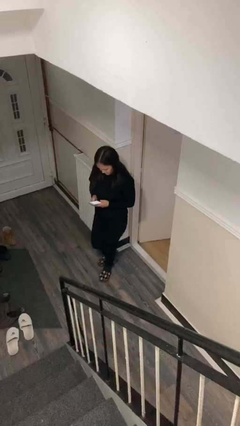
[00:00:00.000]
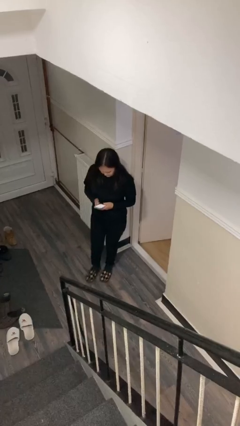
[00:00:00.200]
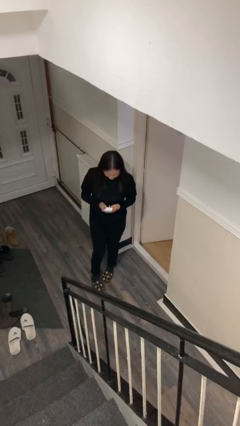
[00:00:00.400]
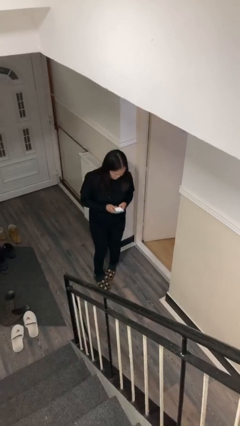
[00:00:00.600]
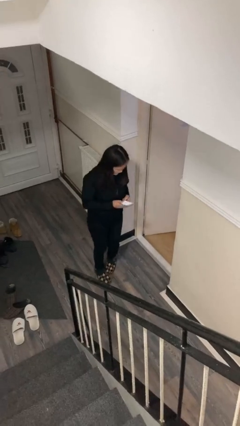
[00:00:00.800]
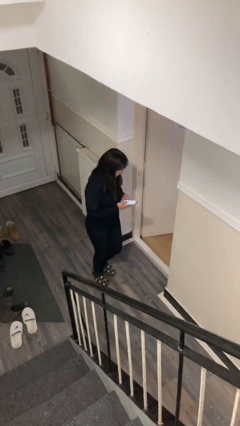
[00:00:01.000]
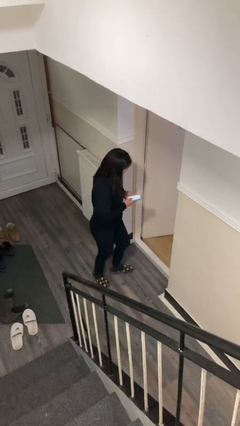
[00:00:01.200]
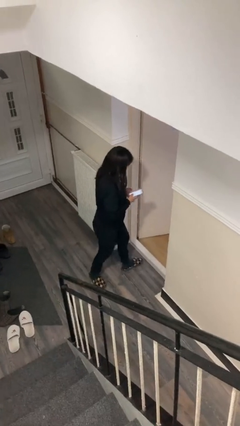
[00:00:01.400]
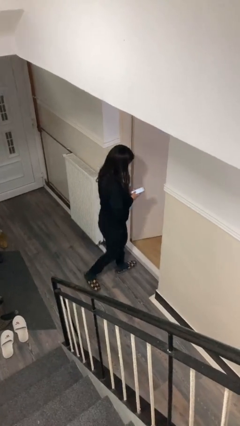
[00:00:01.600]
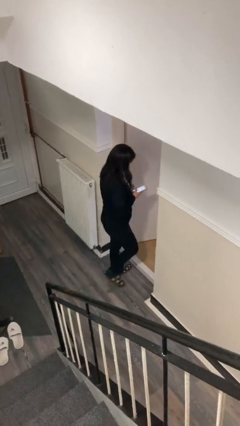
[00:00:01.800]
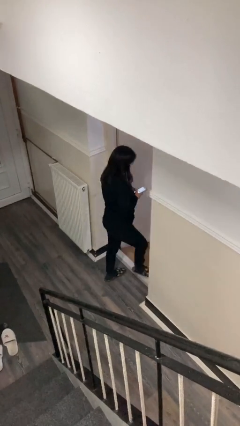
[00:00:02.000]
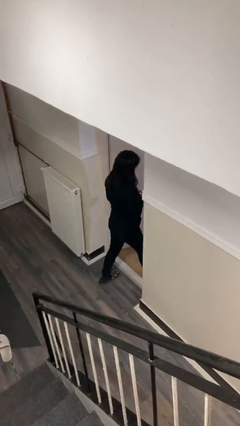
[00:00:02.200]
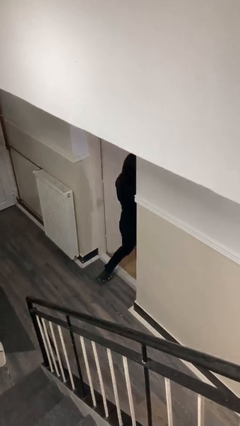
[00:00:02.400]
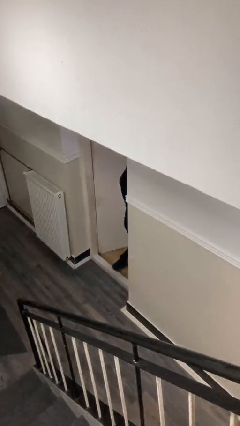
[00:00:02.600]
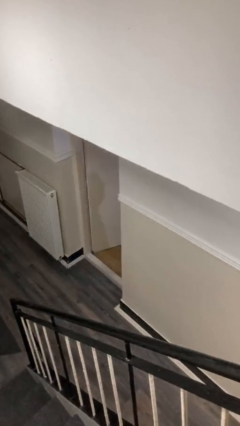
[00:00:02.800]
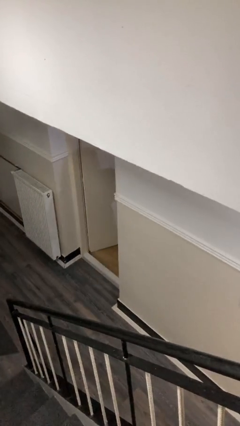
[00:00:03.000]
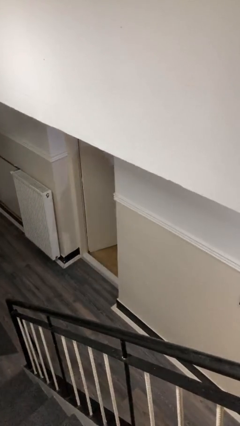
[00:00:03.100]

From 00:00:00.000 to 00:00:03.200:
person exits scene through structure

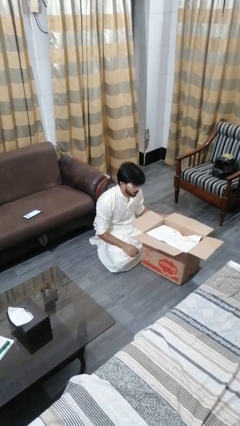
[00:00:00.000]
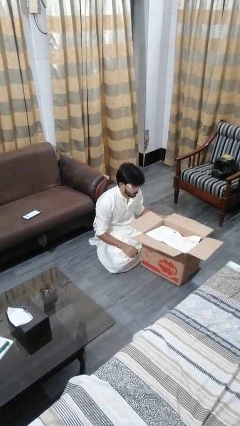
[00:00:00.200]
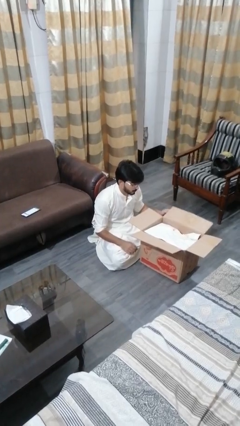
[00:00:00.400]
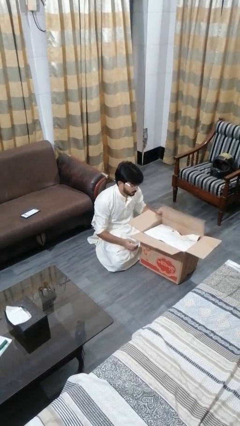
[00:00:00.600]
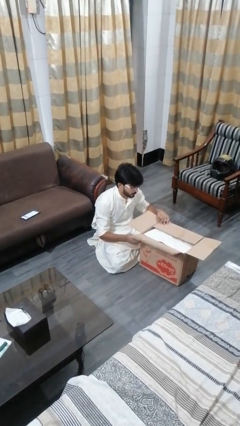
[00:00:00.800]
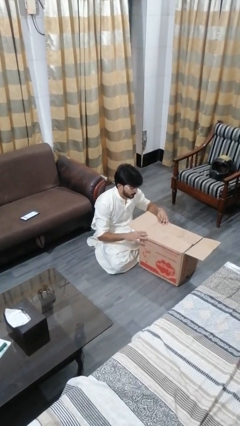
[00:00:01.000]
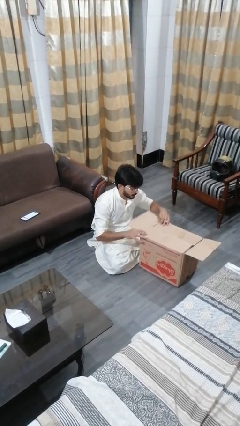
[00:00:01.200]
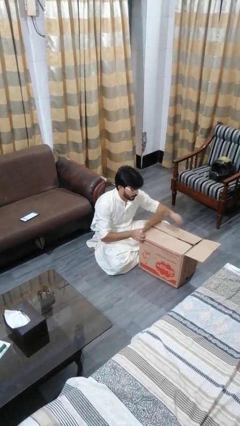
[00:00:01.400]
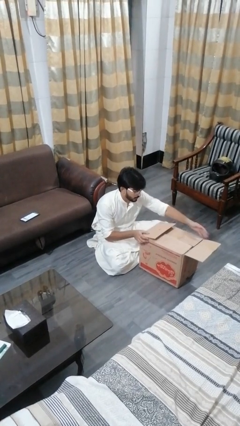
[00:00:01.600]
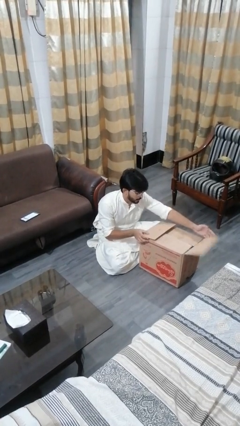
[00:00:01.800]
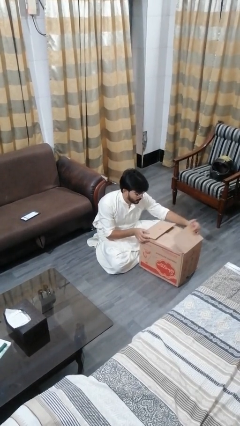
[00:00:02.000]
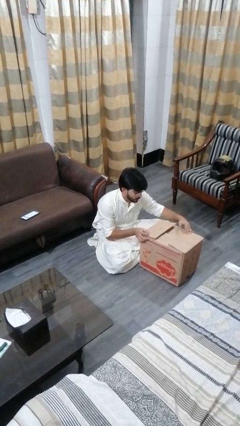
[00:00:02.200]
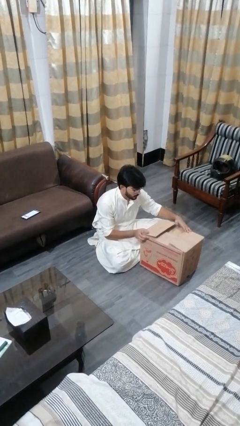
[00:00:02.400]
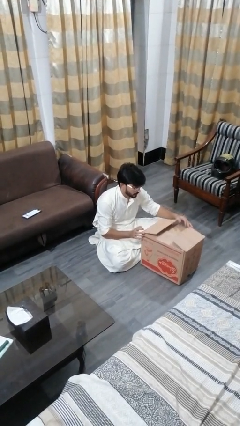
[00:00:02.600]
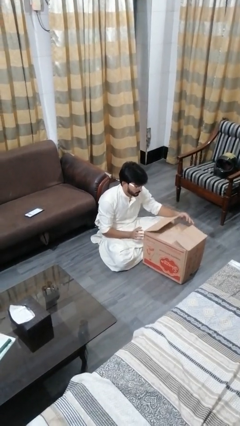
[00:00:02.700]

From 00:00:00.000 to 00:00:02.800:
person closes box

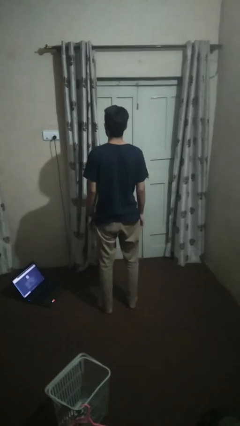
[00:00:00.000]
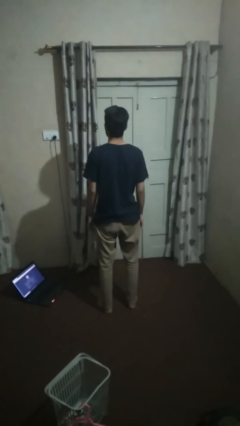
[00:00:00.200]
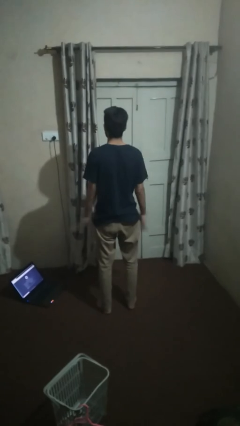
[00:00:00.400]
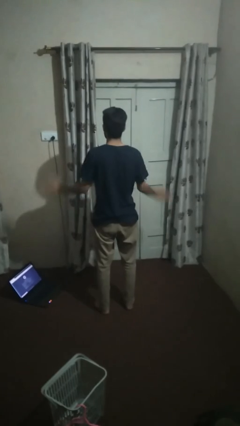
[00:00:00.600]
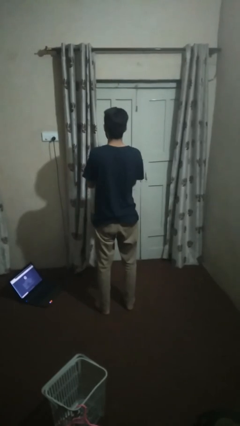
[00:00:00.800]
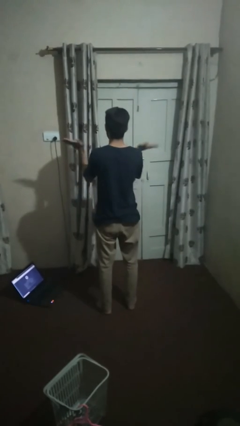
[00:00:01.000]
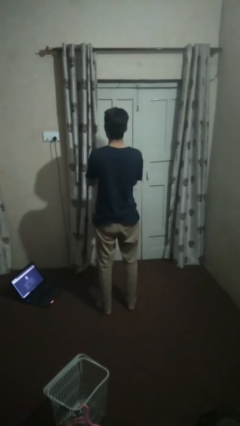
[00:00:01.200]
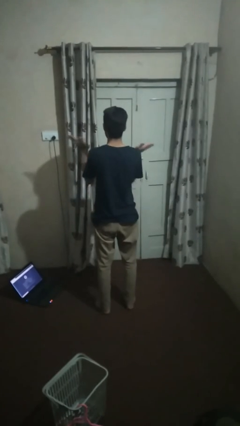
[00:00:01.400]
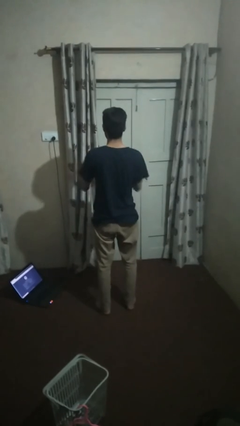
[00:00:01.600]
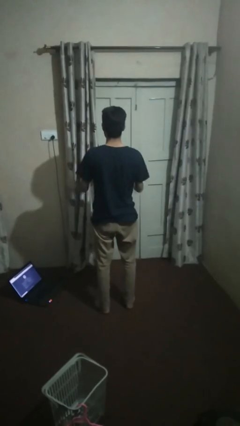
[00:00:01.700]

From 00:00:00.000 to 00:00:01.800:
person claps hands

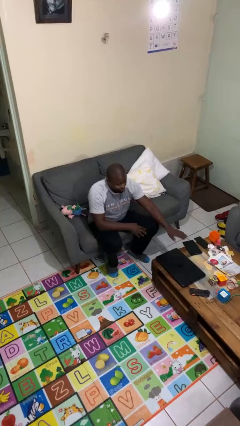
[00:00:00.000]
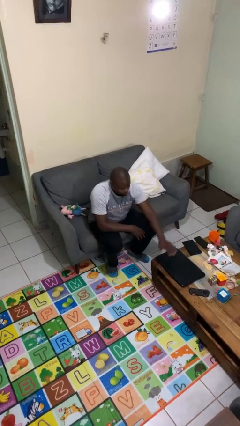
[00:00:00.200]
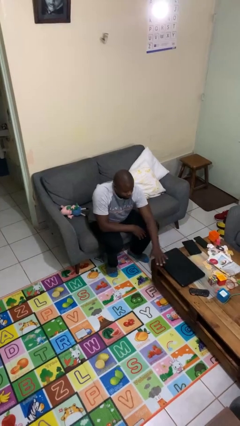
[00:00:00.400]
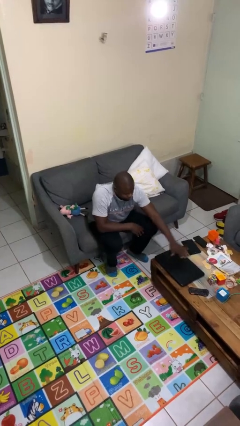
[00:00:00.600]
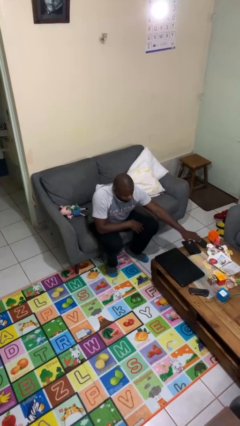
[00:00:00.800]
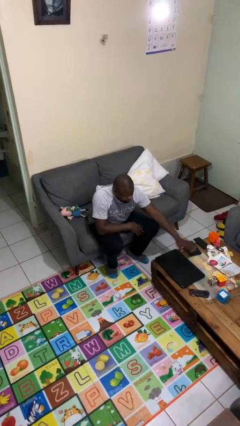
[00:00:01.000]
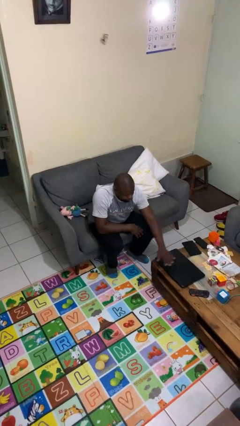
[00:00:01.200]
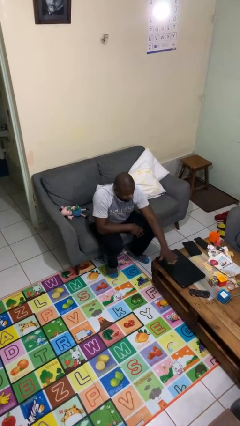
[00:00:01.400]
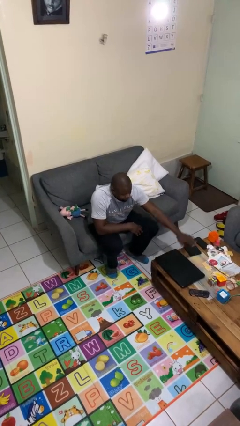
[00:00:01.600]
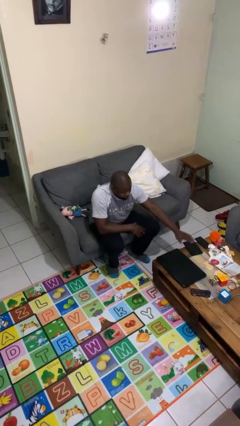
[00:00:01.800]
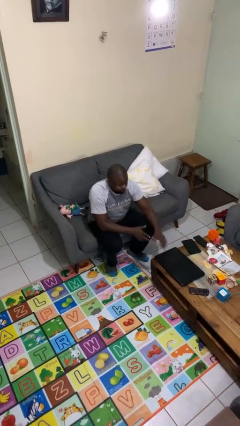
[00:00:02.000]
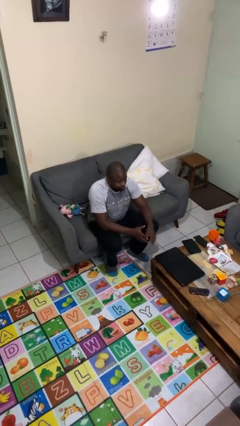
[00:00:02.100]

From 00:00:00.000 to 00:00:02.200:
person waves hand over object

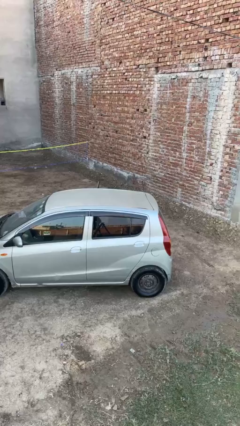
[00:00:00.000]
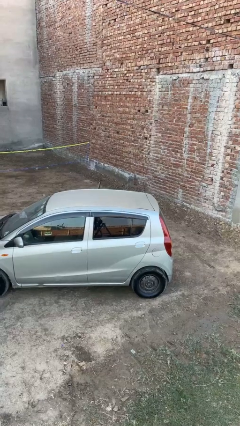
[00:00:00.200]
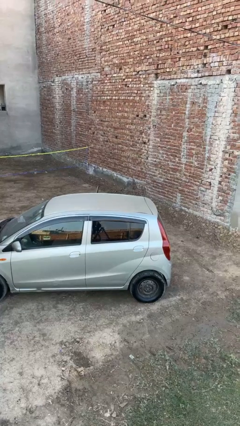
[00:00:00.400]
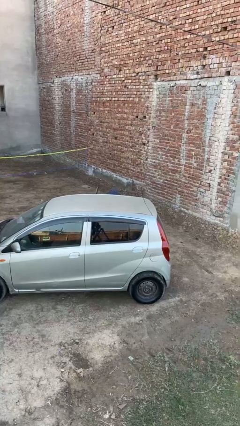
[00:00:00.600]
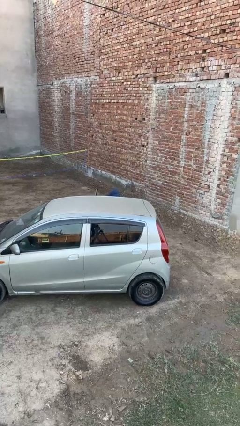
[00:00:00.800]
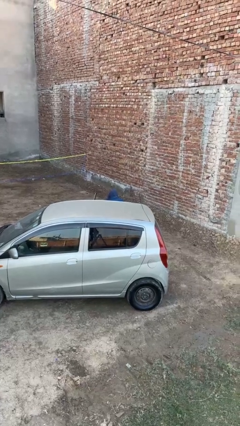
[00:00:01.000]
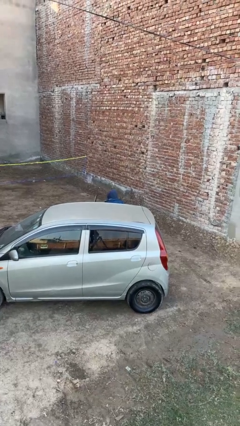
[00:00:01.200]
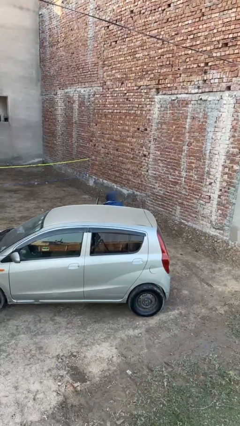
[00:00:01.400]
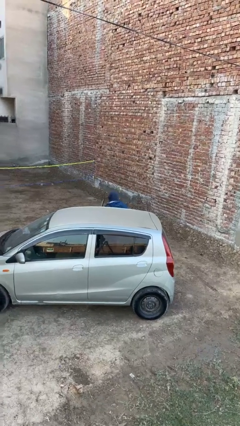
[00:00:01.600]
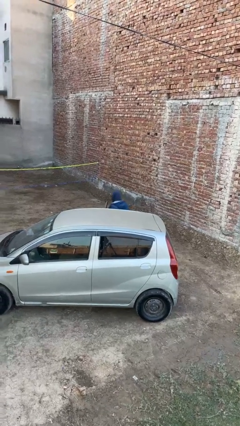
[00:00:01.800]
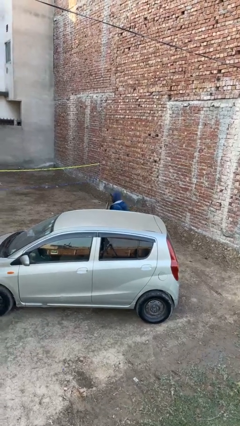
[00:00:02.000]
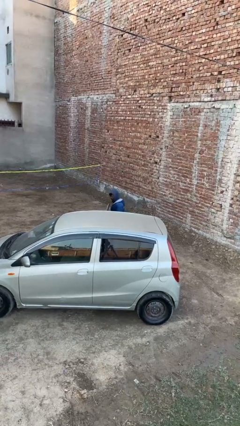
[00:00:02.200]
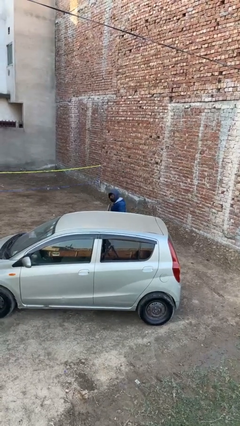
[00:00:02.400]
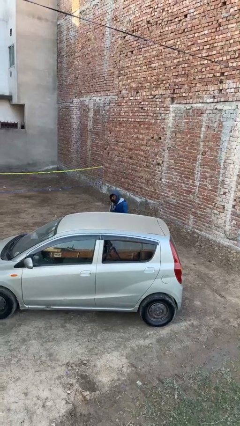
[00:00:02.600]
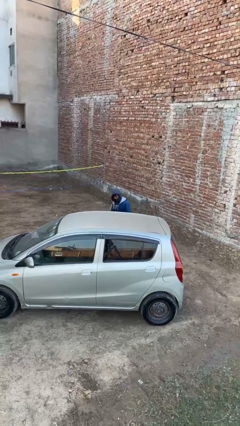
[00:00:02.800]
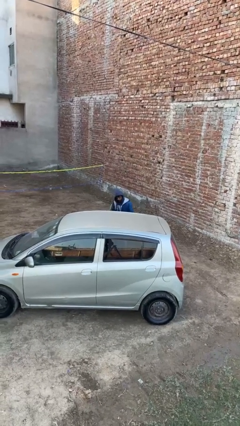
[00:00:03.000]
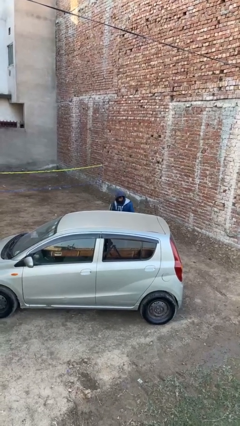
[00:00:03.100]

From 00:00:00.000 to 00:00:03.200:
person exits car

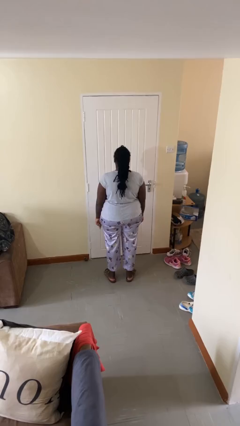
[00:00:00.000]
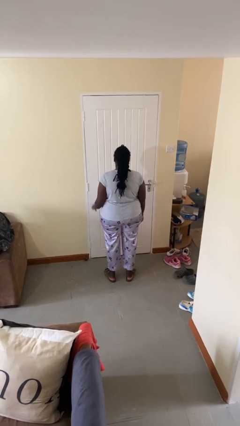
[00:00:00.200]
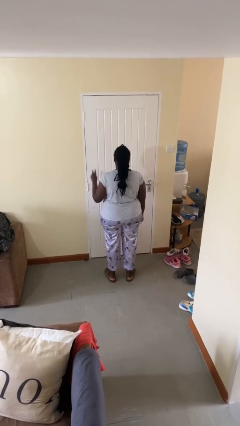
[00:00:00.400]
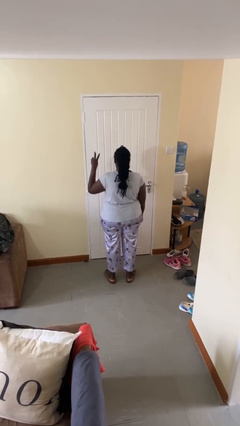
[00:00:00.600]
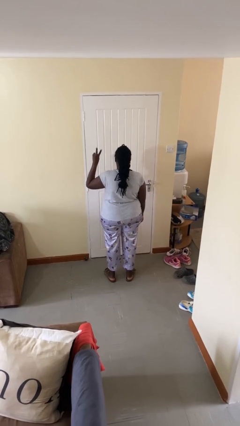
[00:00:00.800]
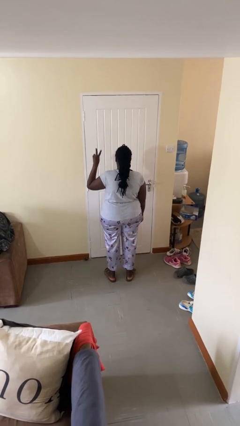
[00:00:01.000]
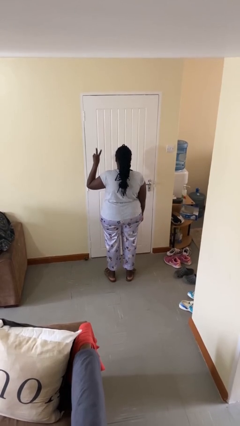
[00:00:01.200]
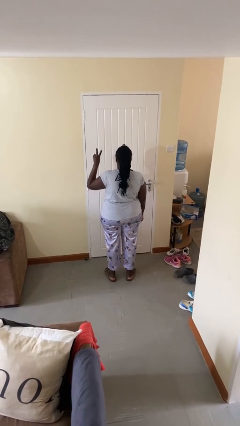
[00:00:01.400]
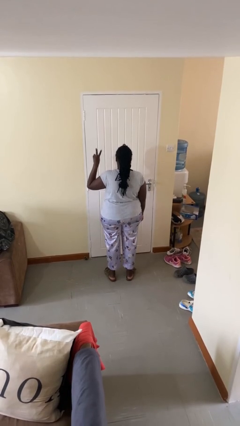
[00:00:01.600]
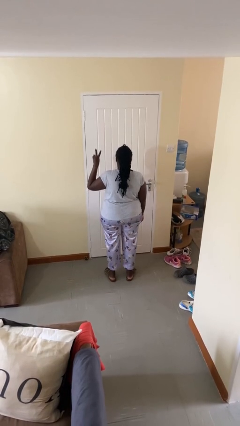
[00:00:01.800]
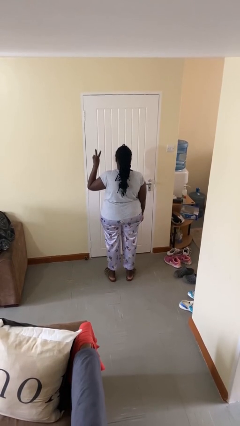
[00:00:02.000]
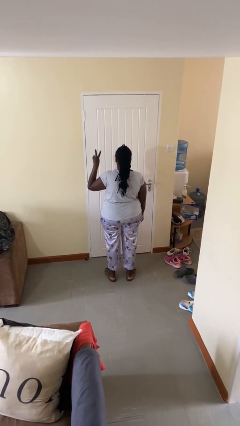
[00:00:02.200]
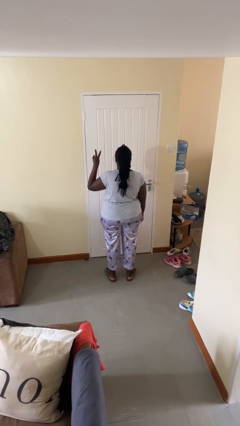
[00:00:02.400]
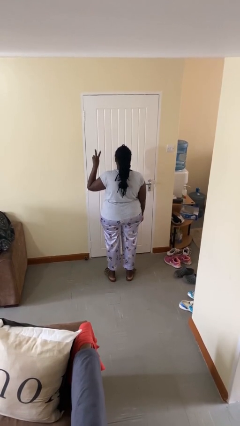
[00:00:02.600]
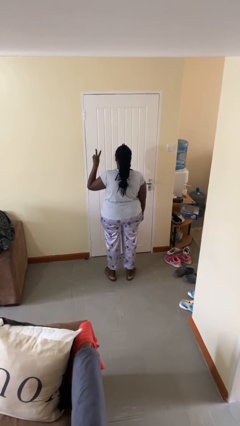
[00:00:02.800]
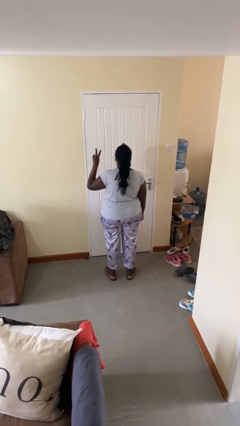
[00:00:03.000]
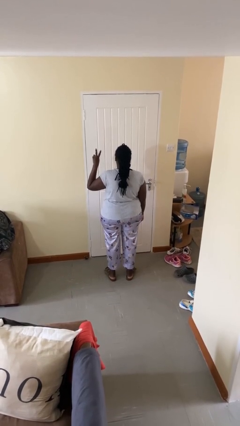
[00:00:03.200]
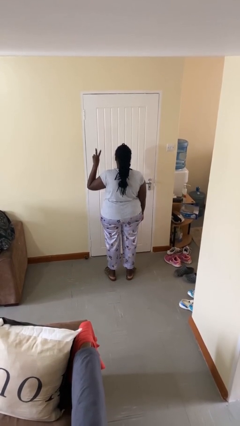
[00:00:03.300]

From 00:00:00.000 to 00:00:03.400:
person gestures peace

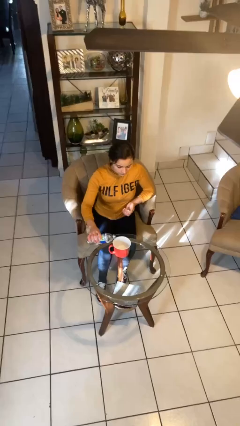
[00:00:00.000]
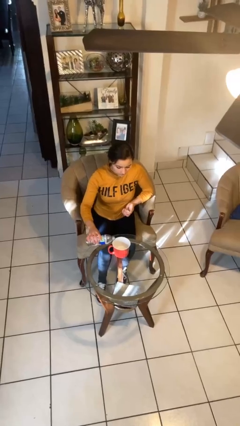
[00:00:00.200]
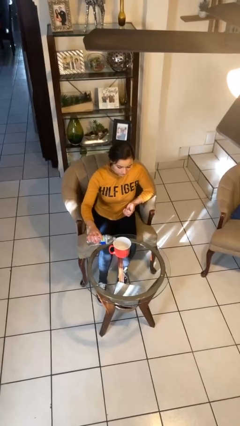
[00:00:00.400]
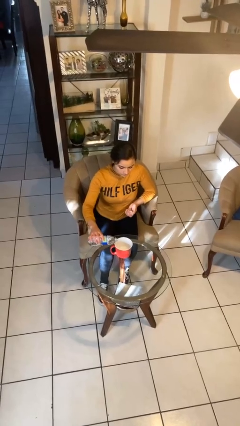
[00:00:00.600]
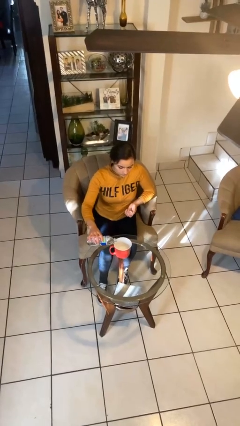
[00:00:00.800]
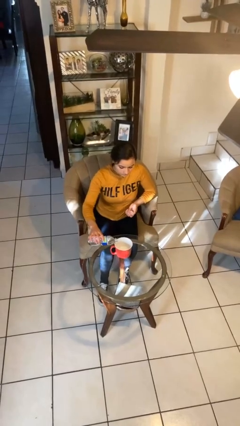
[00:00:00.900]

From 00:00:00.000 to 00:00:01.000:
person pours liquid into cup
